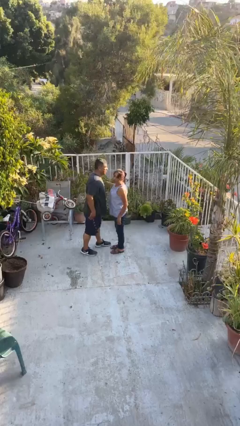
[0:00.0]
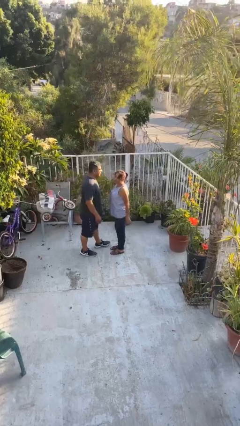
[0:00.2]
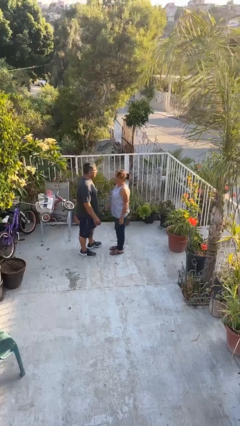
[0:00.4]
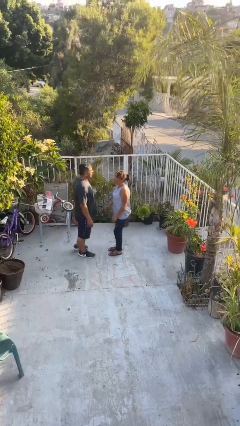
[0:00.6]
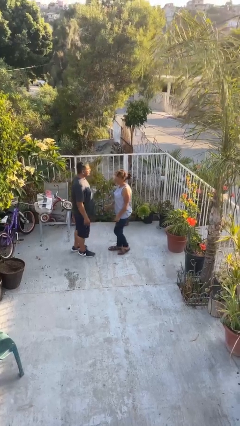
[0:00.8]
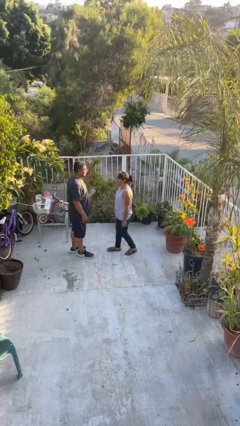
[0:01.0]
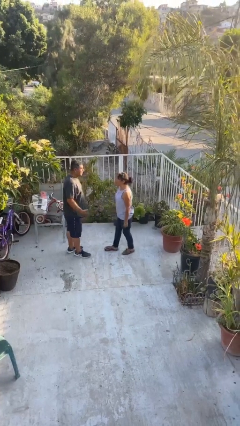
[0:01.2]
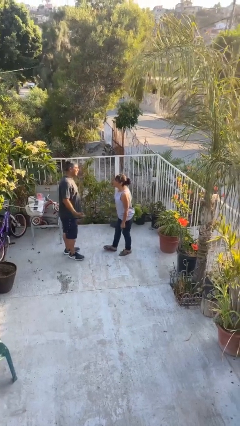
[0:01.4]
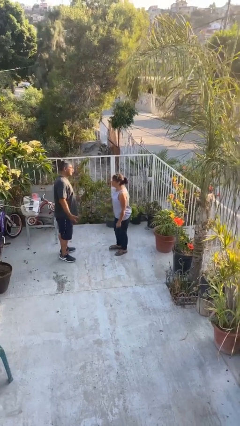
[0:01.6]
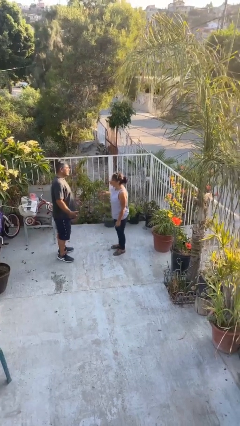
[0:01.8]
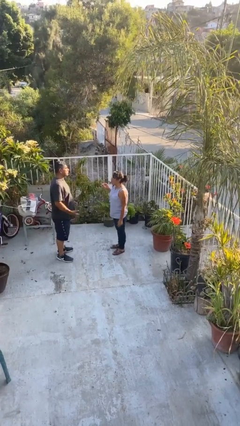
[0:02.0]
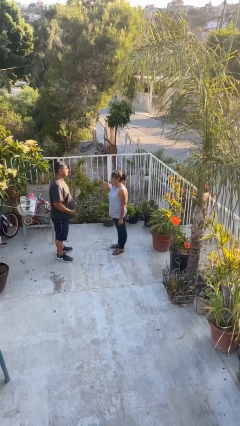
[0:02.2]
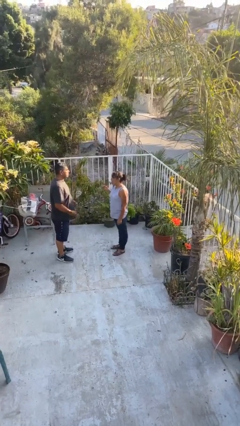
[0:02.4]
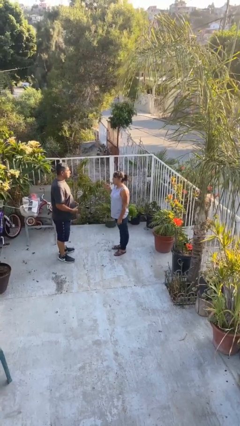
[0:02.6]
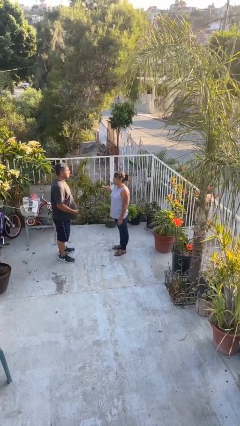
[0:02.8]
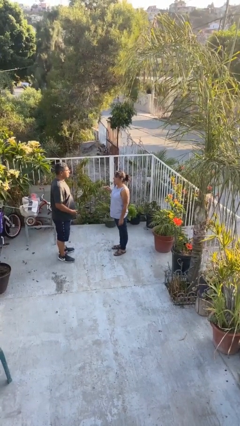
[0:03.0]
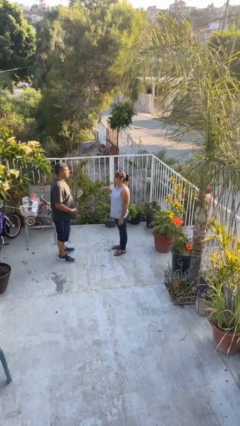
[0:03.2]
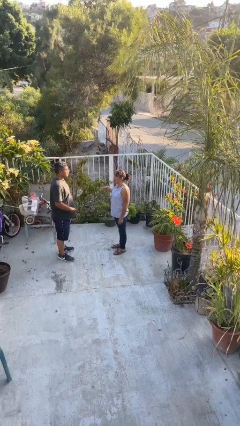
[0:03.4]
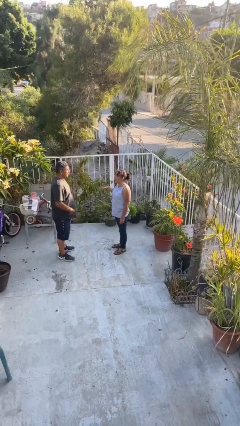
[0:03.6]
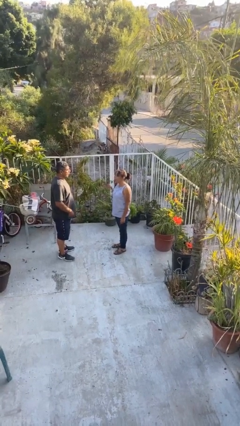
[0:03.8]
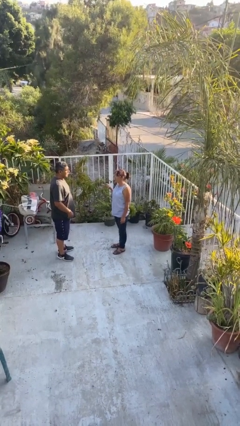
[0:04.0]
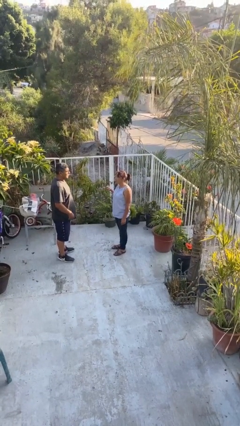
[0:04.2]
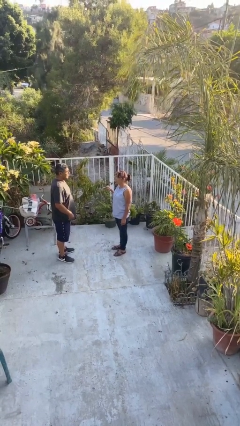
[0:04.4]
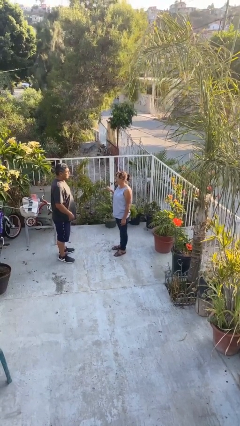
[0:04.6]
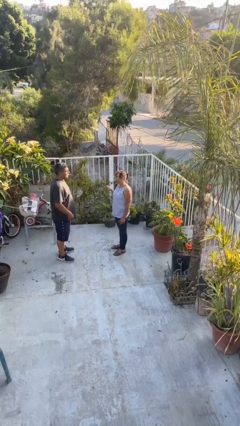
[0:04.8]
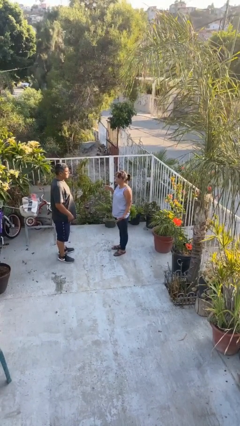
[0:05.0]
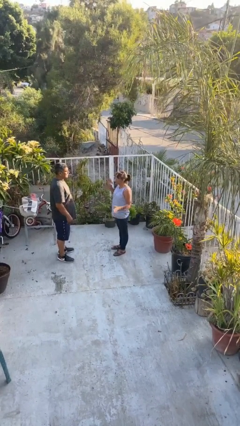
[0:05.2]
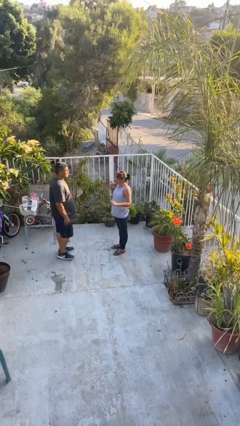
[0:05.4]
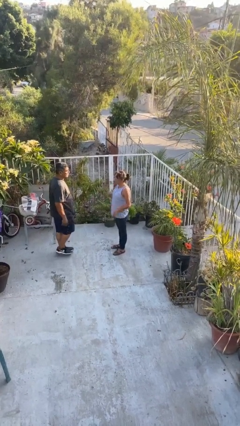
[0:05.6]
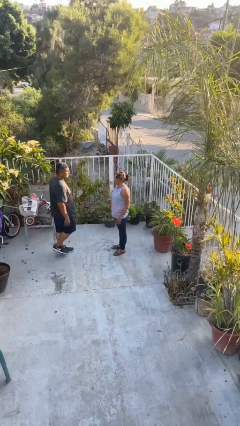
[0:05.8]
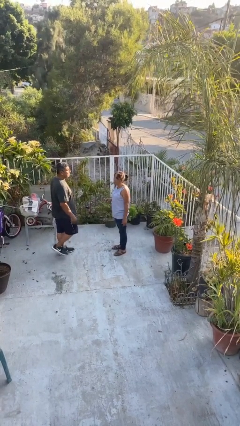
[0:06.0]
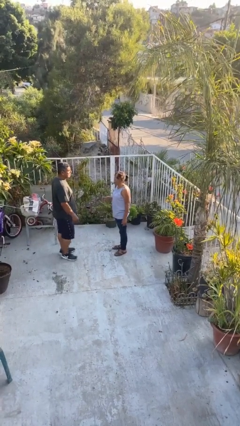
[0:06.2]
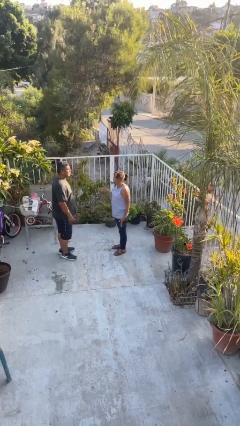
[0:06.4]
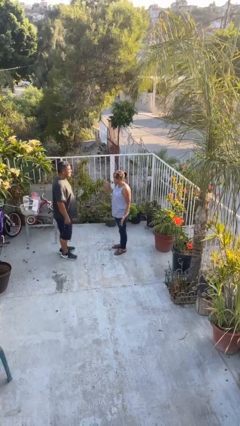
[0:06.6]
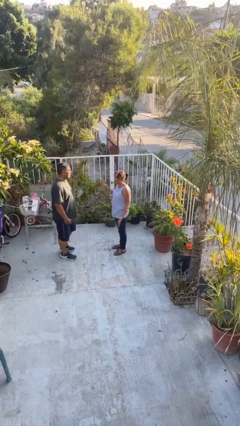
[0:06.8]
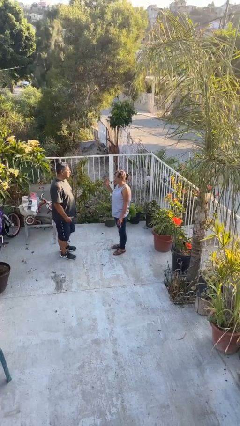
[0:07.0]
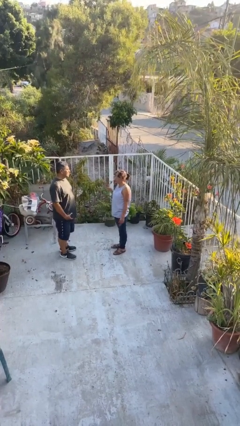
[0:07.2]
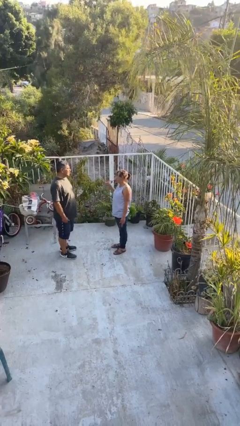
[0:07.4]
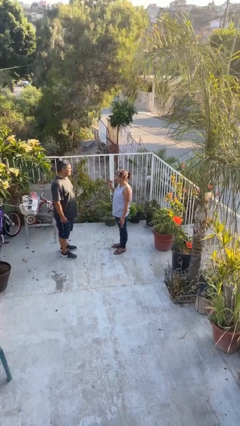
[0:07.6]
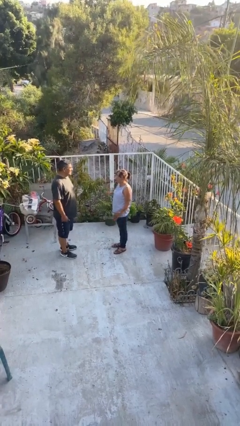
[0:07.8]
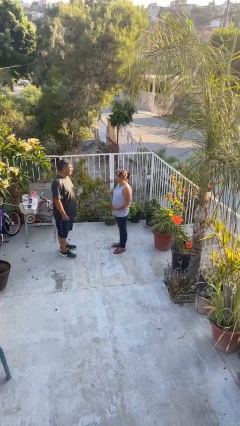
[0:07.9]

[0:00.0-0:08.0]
person talks to person

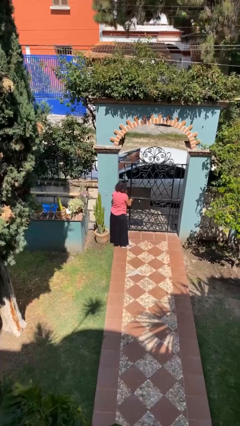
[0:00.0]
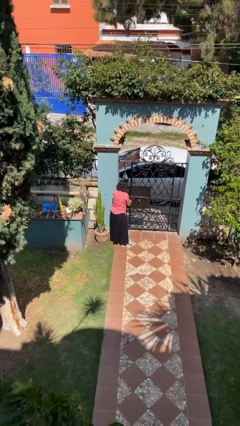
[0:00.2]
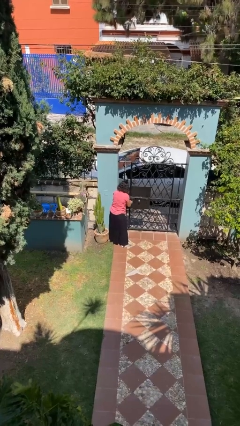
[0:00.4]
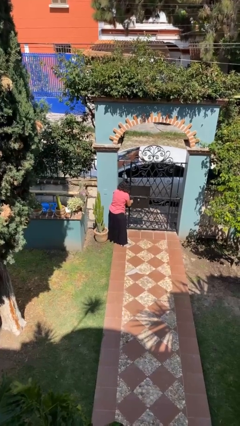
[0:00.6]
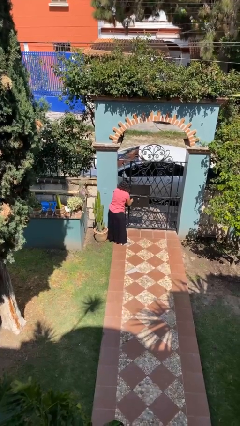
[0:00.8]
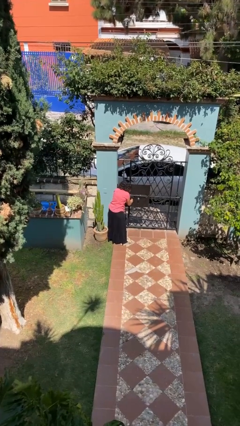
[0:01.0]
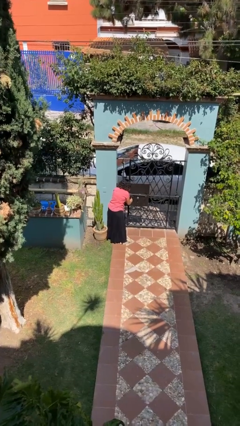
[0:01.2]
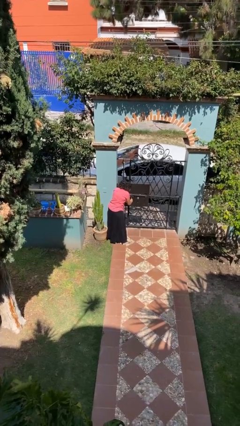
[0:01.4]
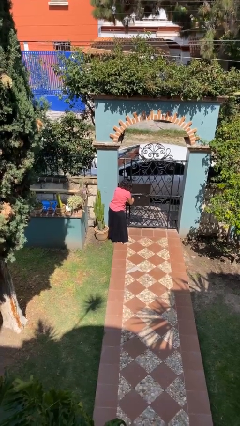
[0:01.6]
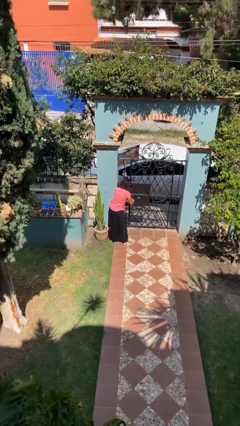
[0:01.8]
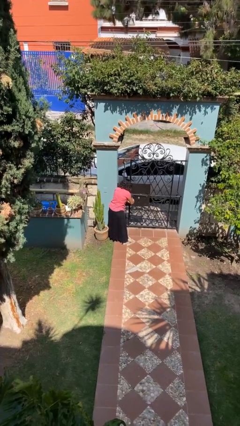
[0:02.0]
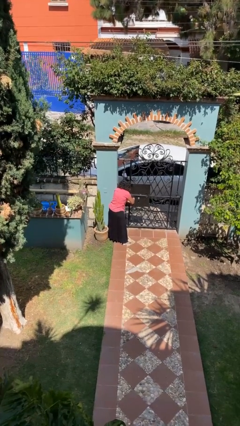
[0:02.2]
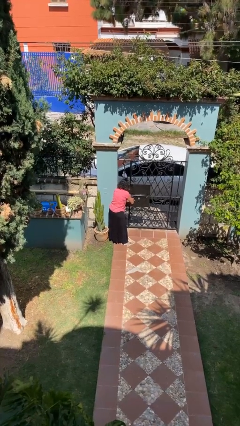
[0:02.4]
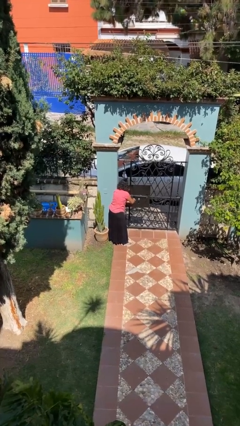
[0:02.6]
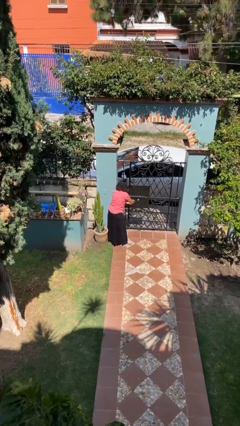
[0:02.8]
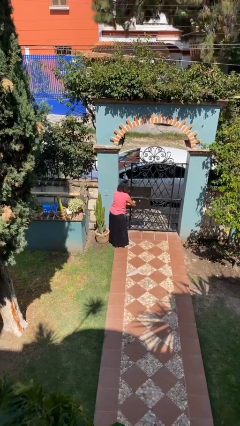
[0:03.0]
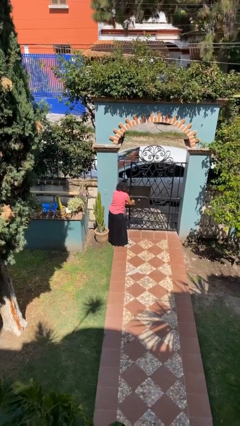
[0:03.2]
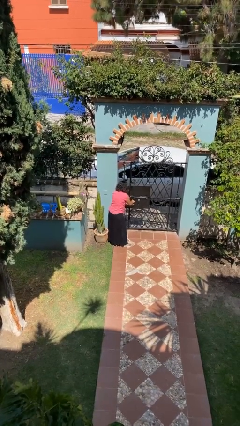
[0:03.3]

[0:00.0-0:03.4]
person locks door with keys

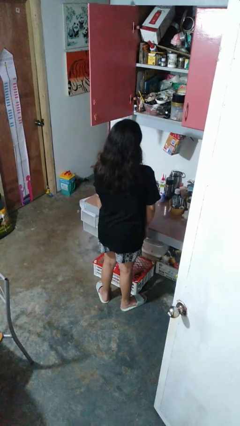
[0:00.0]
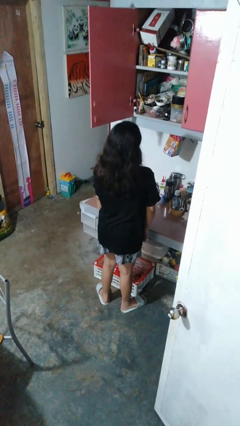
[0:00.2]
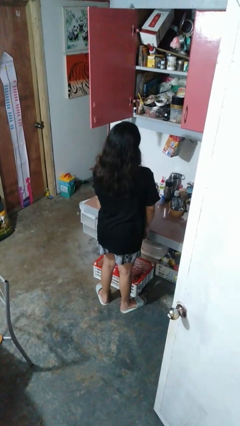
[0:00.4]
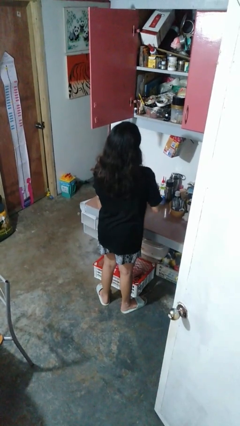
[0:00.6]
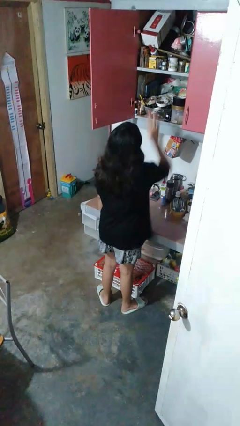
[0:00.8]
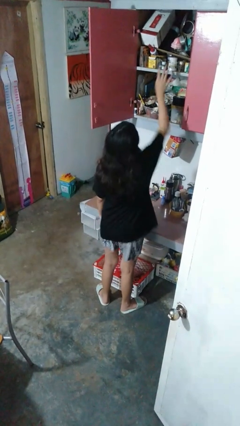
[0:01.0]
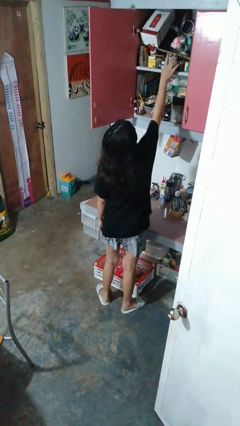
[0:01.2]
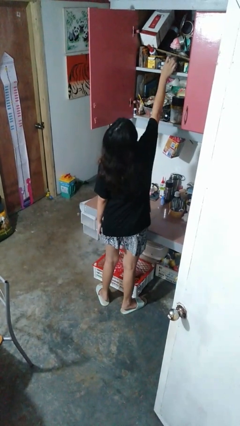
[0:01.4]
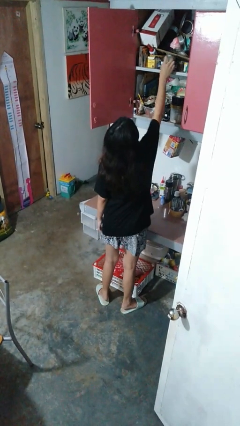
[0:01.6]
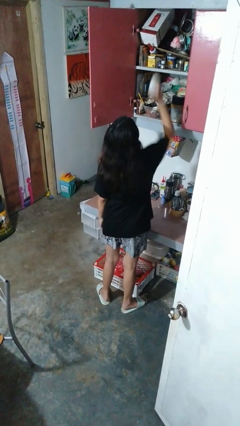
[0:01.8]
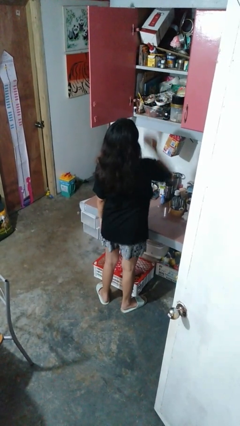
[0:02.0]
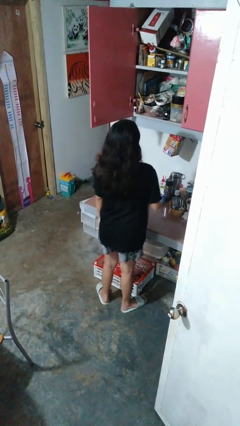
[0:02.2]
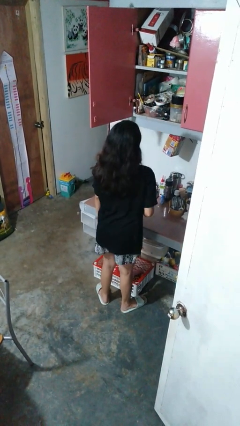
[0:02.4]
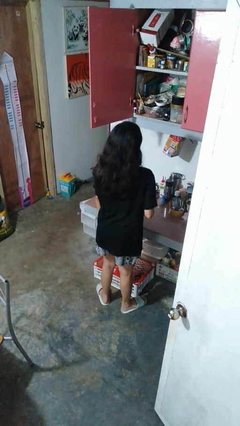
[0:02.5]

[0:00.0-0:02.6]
person takes object from cabinet

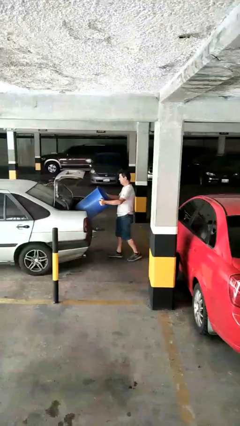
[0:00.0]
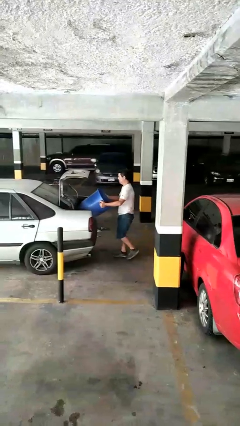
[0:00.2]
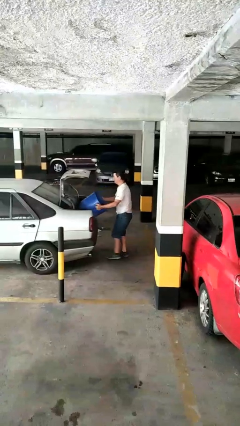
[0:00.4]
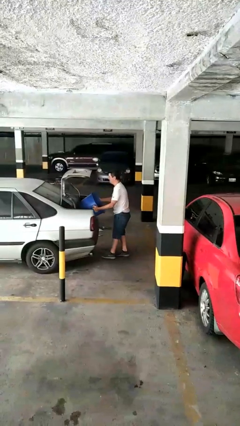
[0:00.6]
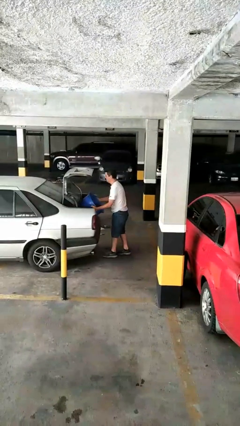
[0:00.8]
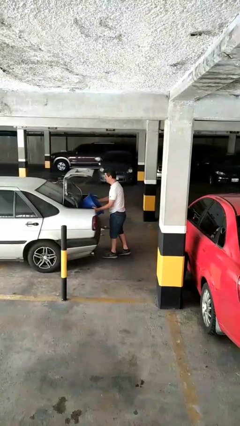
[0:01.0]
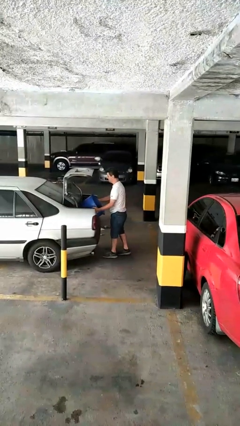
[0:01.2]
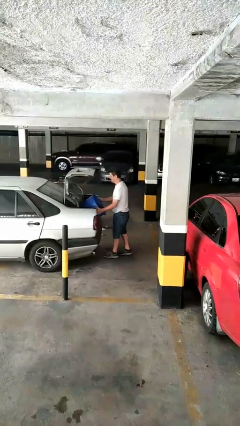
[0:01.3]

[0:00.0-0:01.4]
person loads car

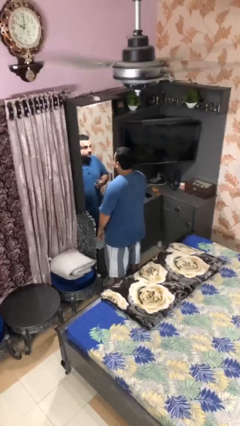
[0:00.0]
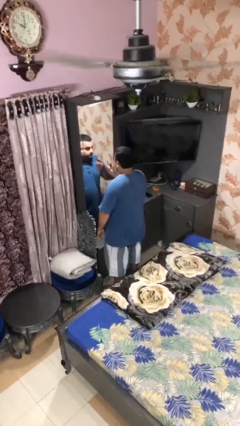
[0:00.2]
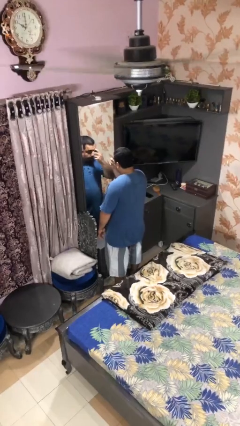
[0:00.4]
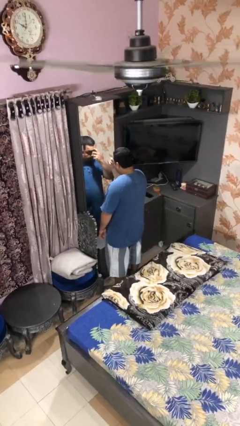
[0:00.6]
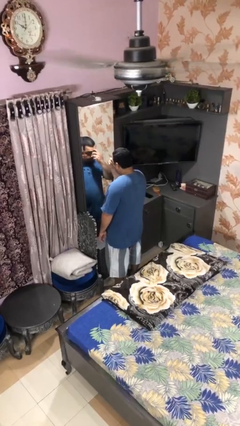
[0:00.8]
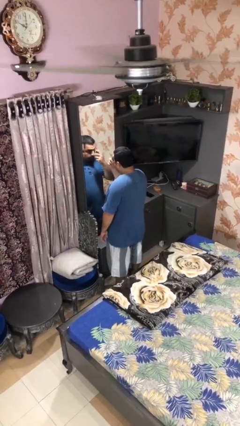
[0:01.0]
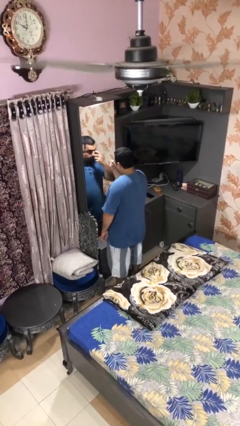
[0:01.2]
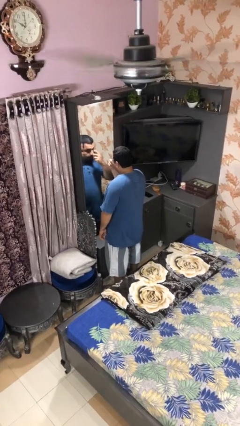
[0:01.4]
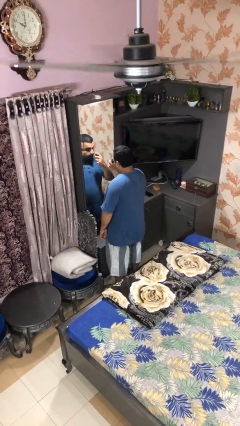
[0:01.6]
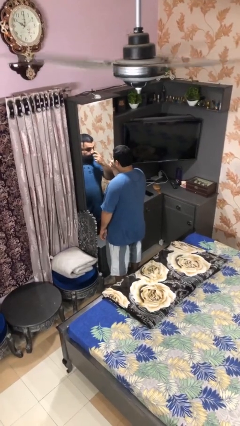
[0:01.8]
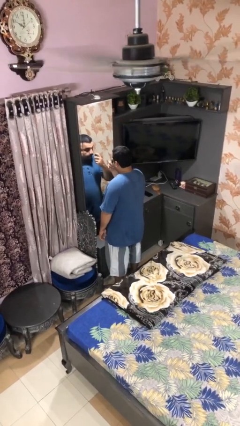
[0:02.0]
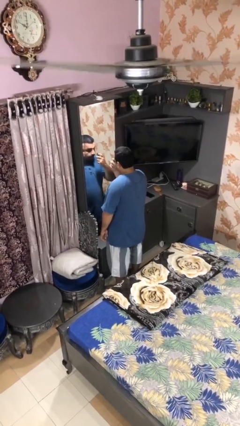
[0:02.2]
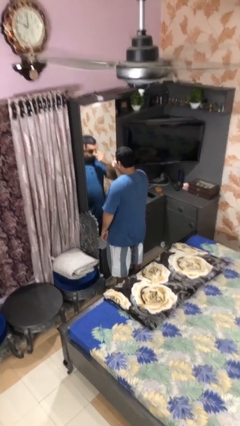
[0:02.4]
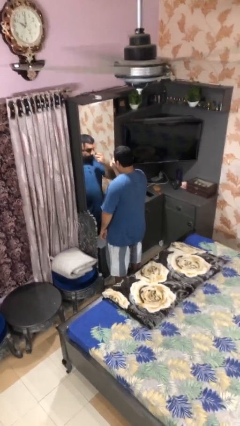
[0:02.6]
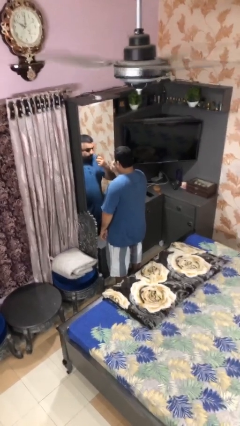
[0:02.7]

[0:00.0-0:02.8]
person applies foundation makeup
